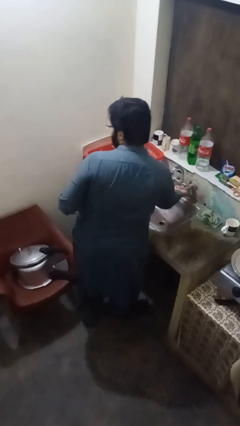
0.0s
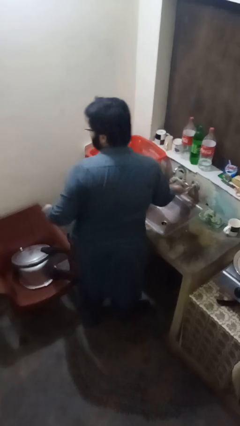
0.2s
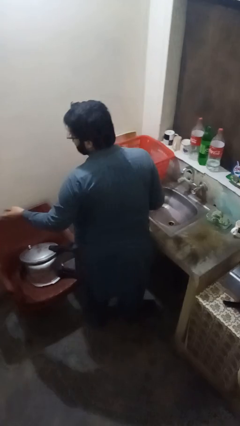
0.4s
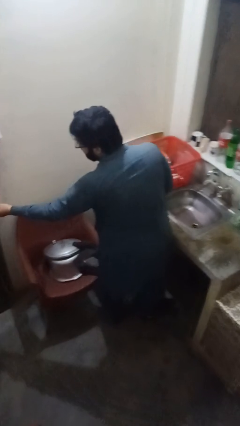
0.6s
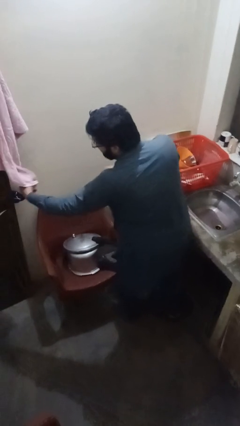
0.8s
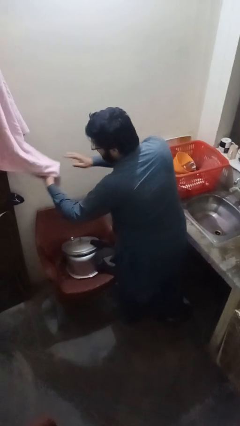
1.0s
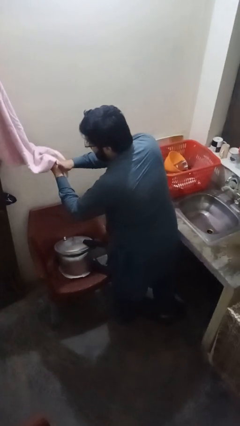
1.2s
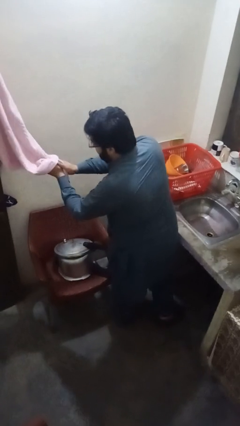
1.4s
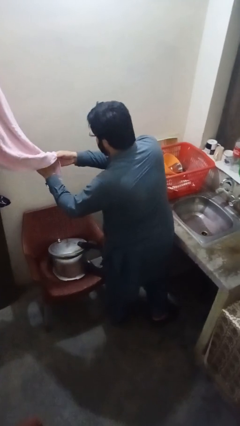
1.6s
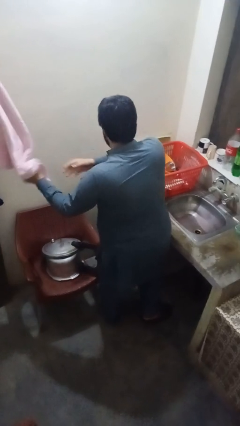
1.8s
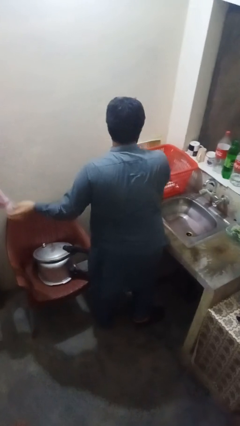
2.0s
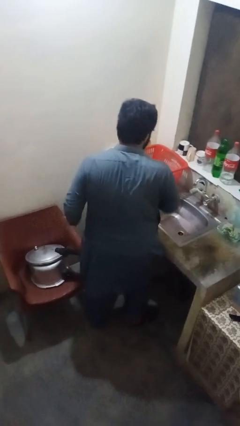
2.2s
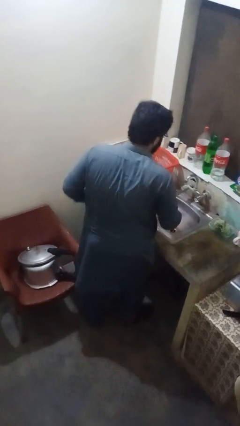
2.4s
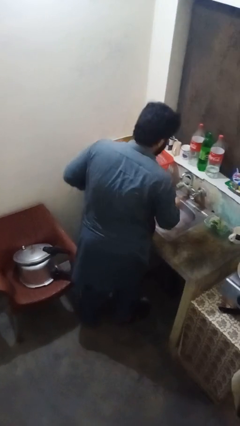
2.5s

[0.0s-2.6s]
person dries hands with towel

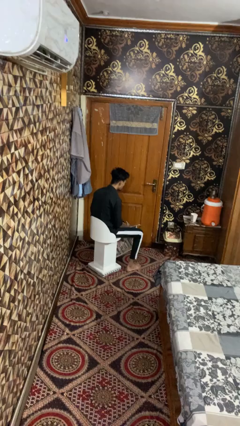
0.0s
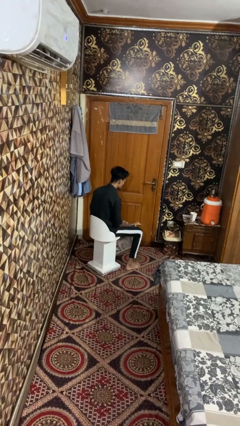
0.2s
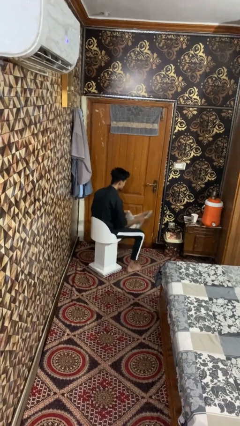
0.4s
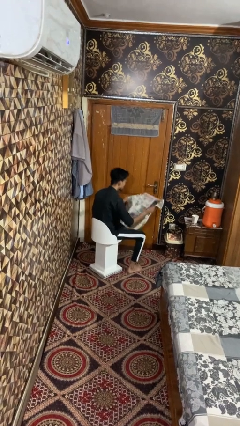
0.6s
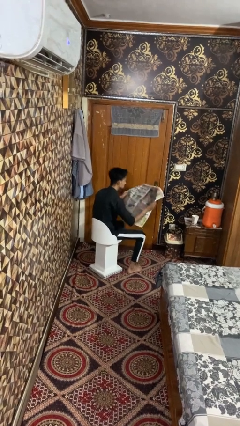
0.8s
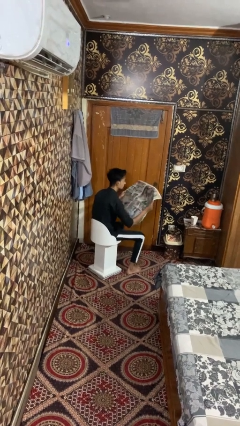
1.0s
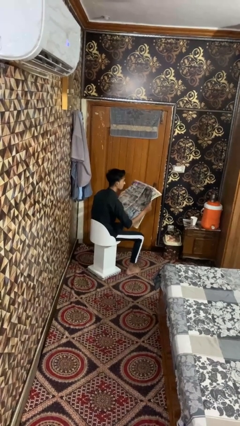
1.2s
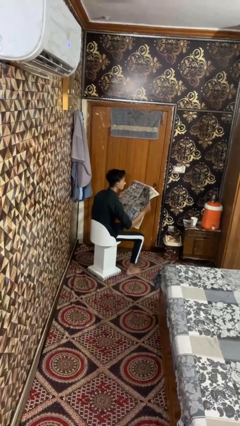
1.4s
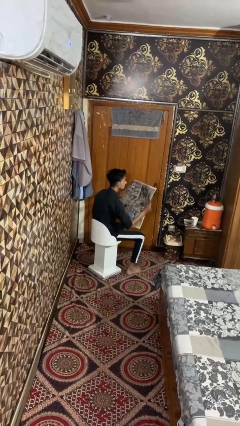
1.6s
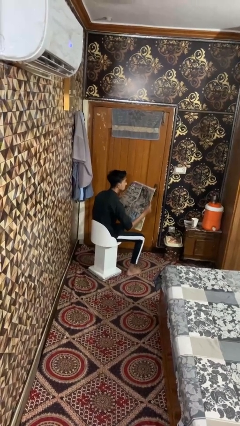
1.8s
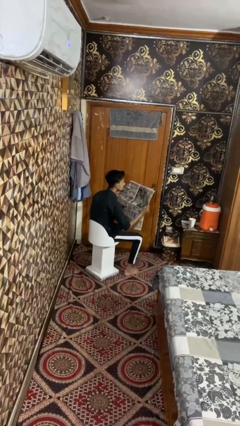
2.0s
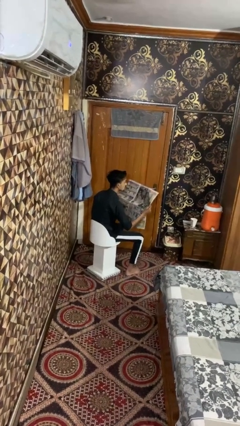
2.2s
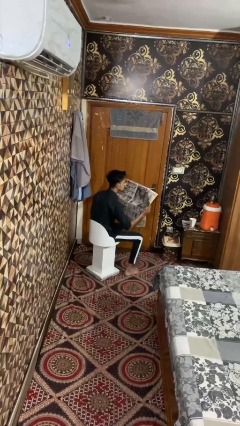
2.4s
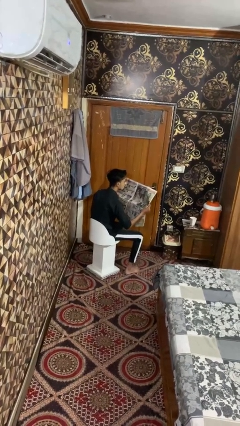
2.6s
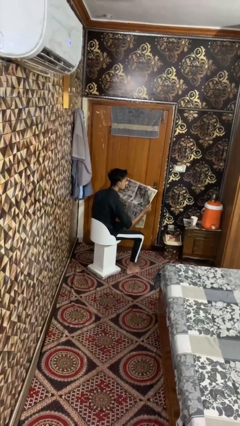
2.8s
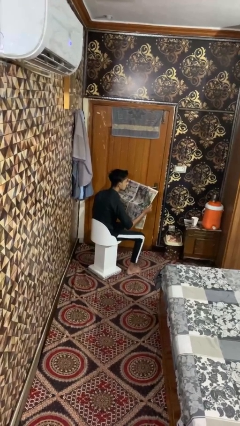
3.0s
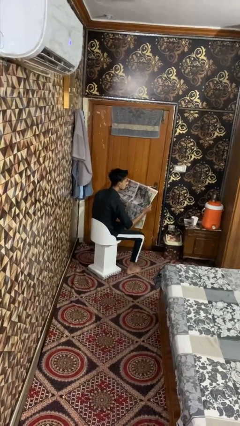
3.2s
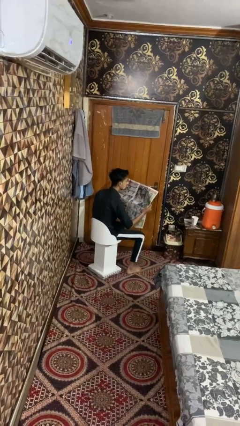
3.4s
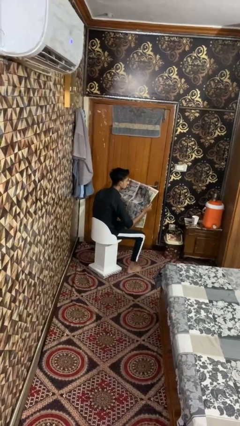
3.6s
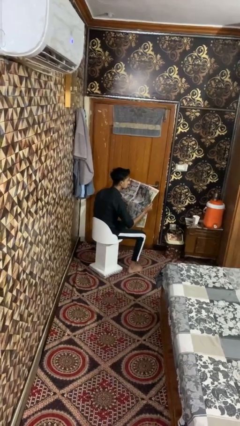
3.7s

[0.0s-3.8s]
person reads magazine

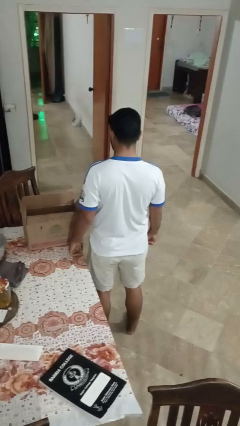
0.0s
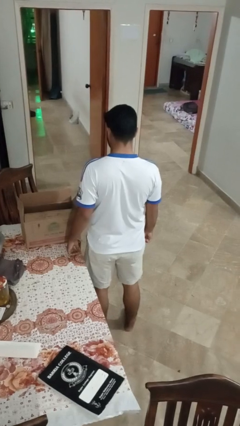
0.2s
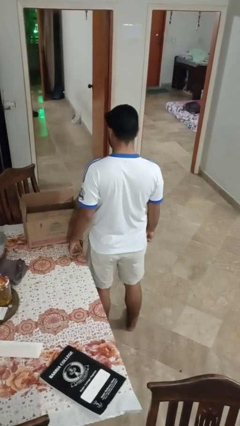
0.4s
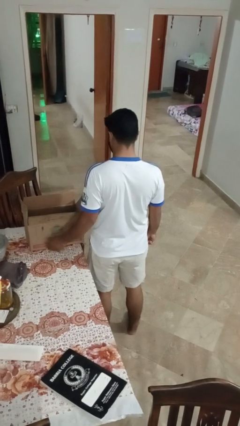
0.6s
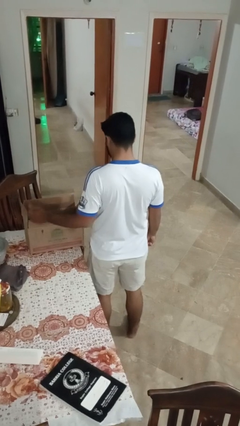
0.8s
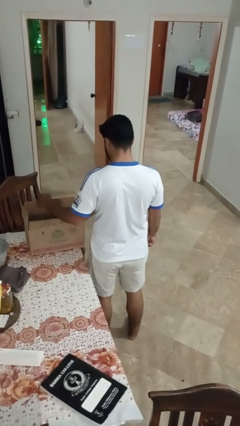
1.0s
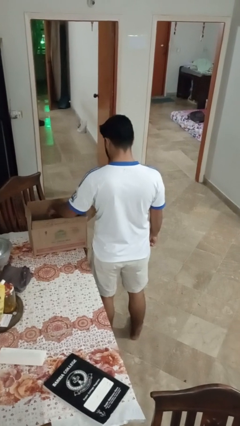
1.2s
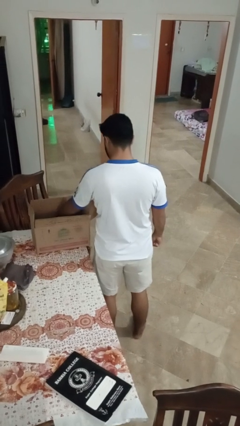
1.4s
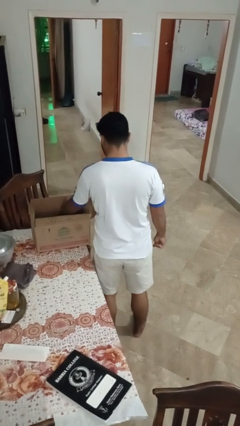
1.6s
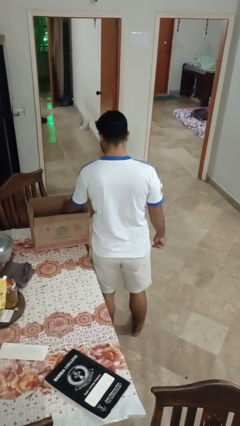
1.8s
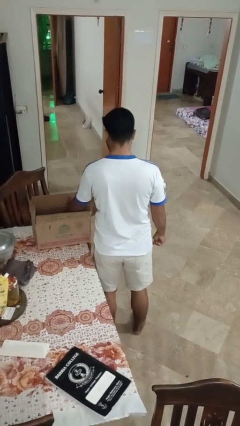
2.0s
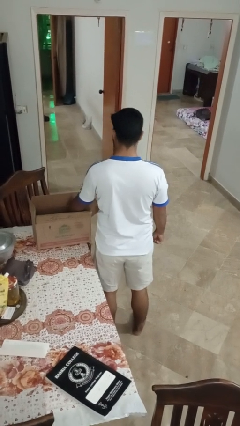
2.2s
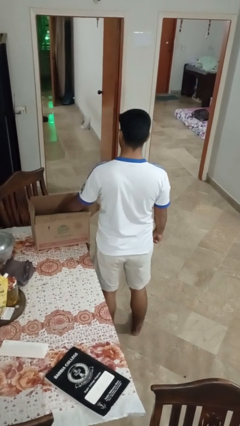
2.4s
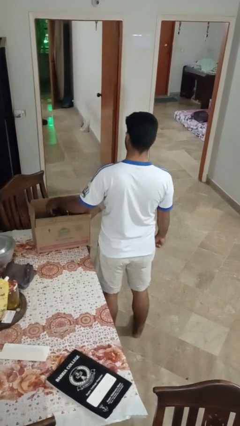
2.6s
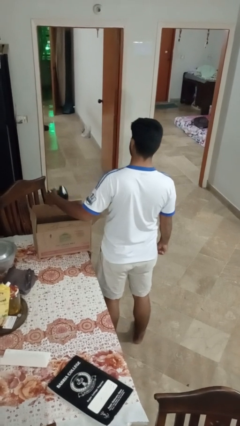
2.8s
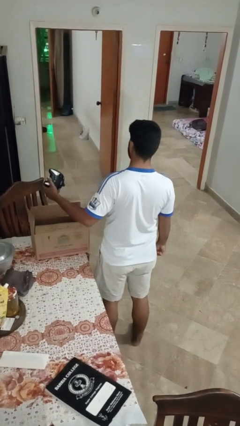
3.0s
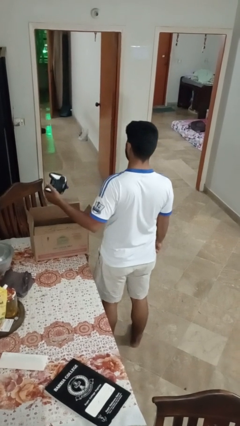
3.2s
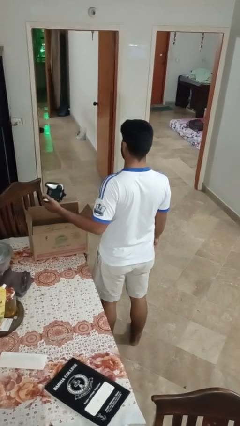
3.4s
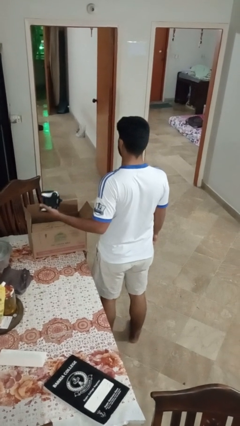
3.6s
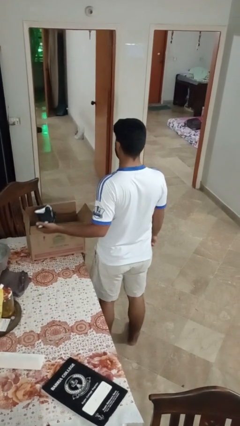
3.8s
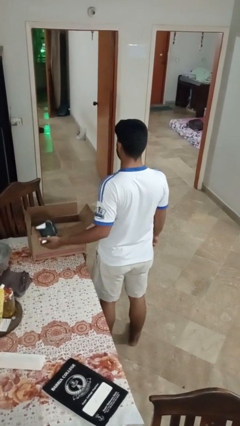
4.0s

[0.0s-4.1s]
person takes object from box

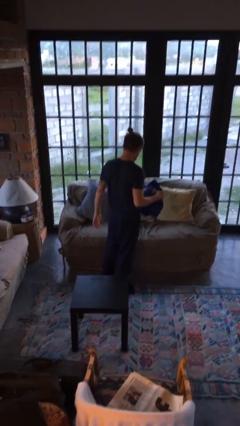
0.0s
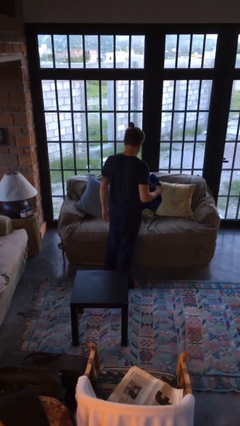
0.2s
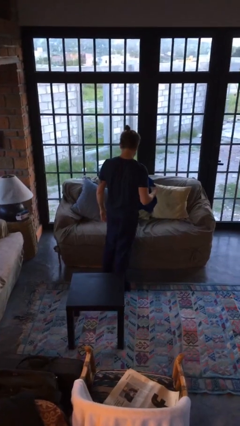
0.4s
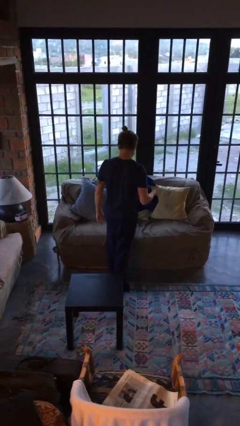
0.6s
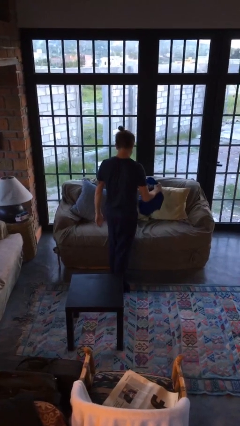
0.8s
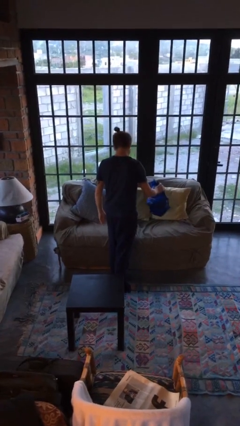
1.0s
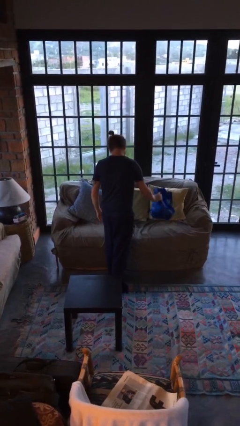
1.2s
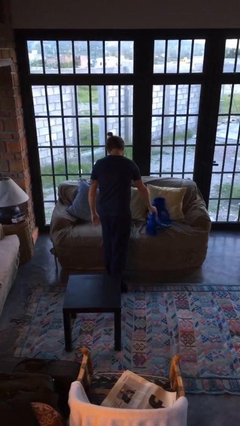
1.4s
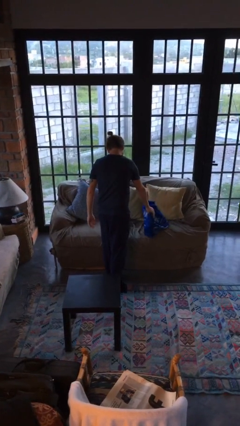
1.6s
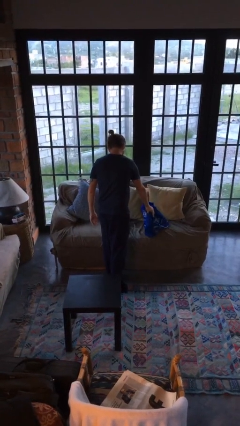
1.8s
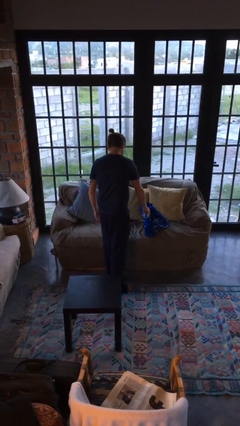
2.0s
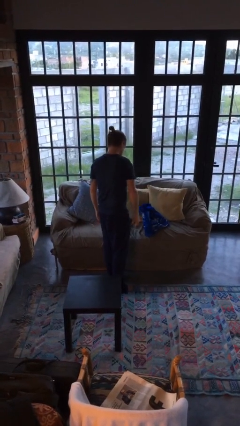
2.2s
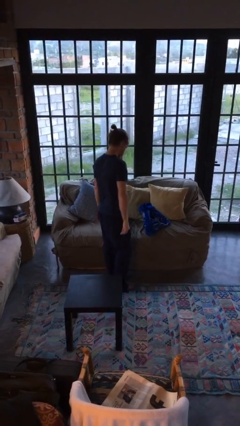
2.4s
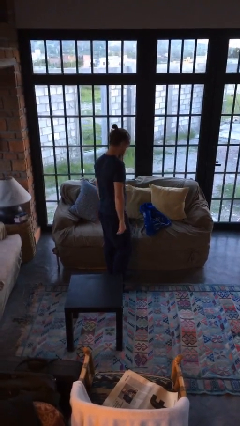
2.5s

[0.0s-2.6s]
person puts down object on couch

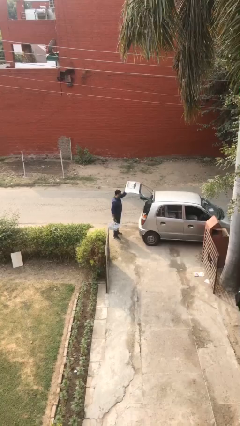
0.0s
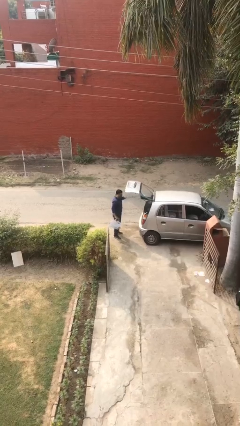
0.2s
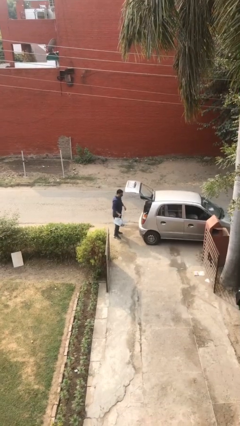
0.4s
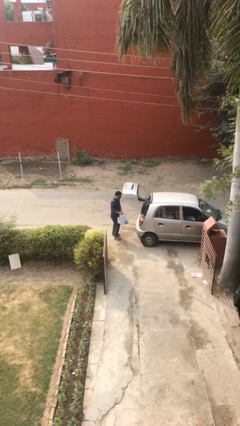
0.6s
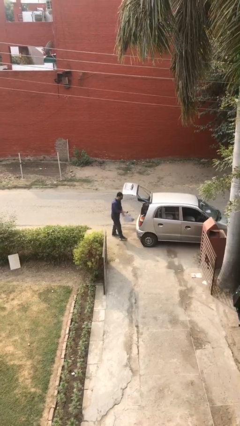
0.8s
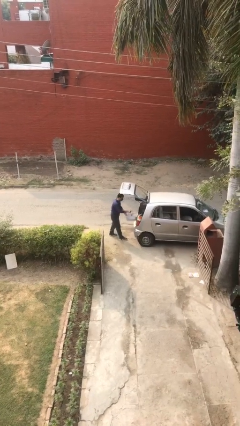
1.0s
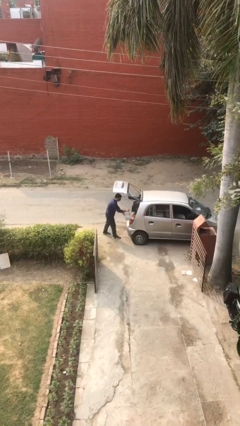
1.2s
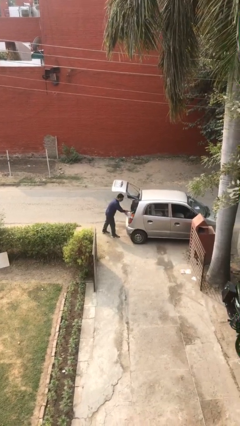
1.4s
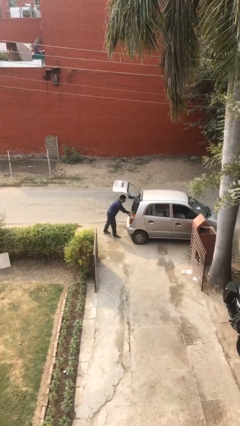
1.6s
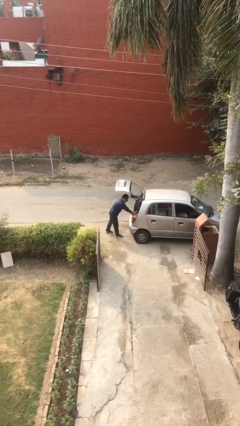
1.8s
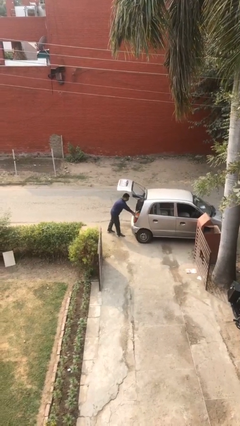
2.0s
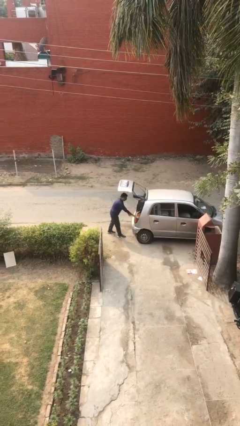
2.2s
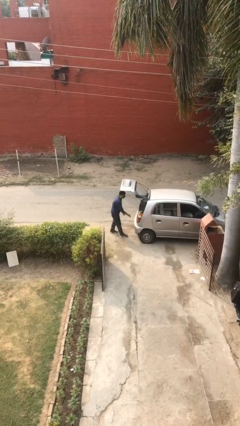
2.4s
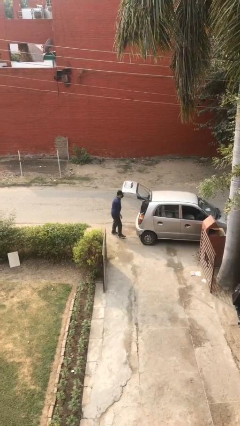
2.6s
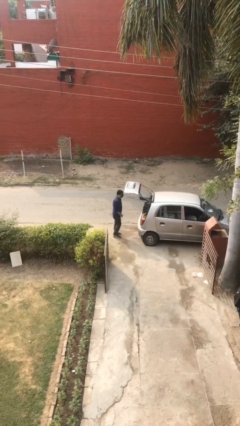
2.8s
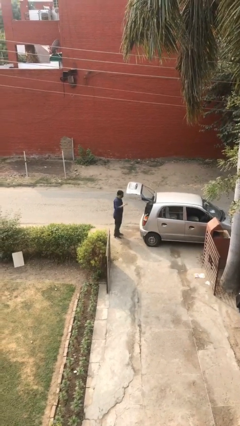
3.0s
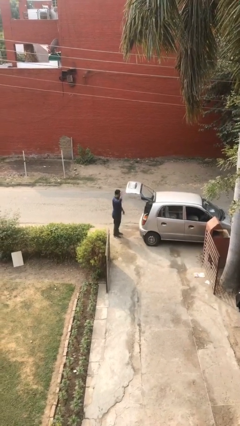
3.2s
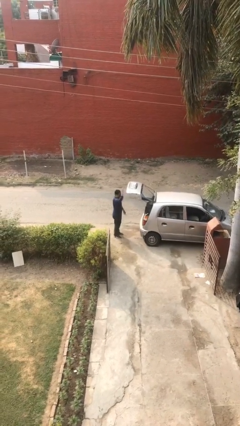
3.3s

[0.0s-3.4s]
person loads car

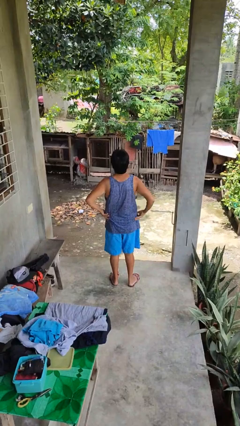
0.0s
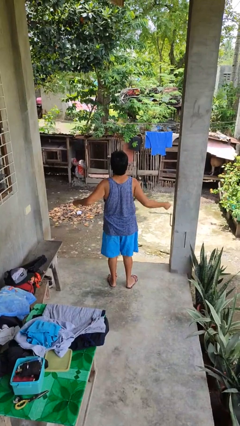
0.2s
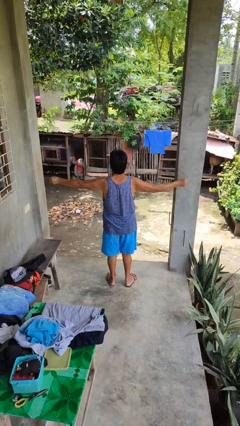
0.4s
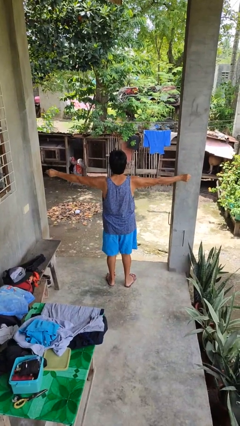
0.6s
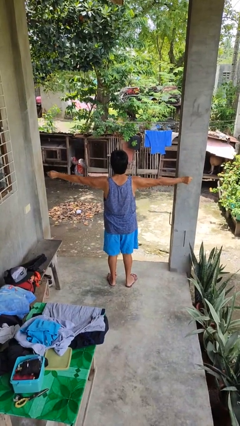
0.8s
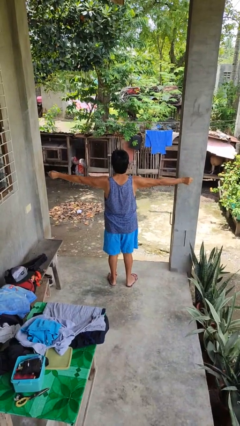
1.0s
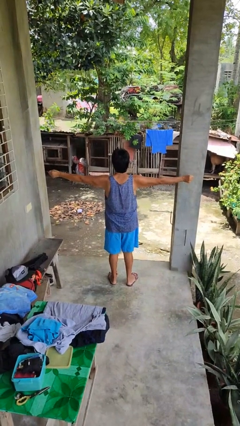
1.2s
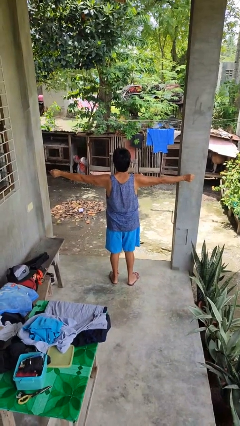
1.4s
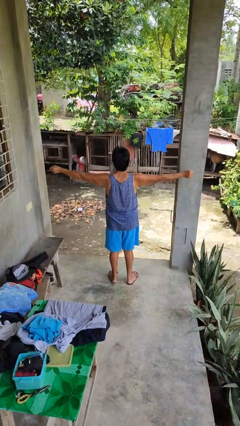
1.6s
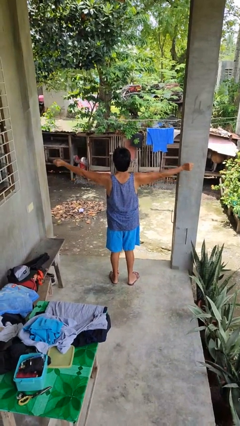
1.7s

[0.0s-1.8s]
person stretches arms to side
